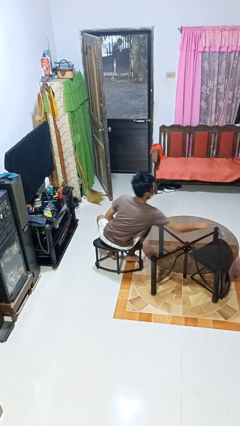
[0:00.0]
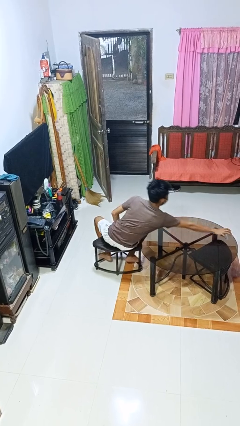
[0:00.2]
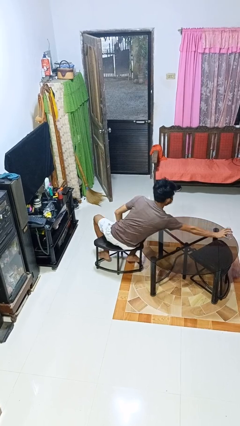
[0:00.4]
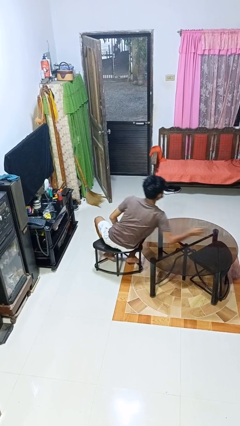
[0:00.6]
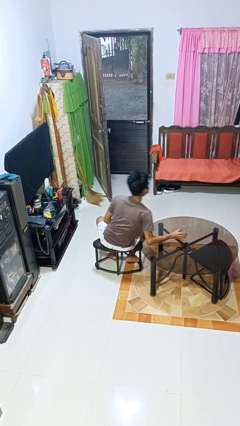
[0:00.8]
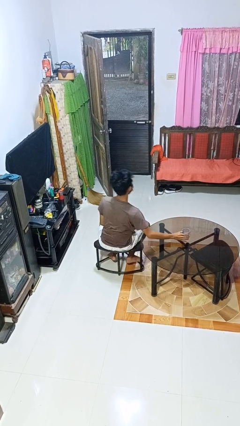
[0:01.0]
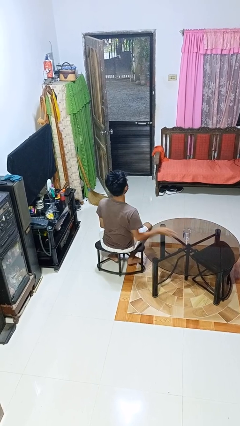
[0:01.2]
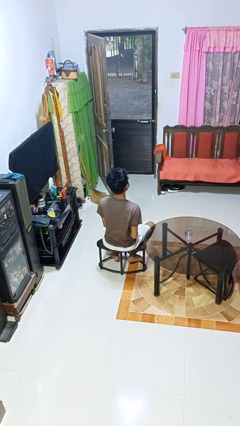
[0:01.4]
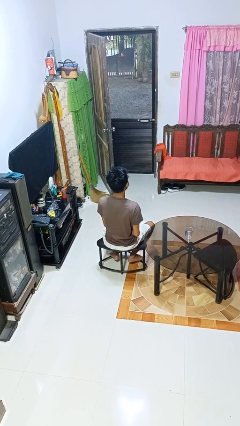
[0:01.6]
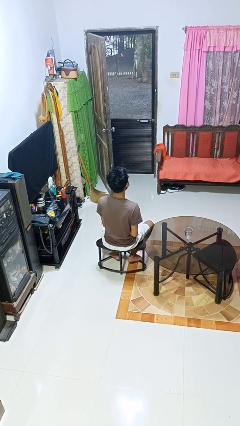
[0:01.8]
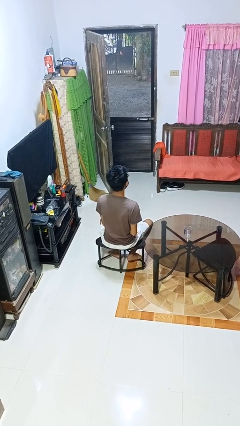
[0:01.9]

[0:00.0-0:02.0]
person sets upright glass

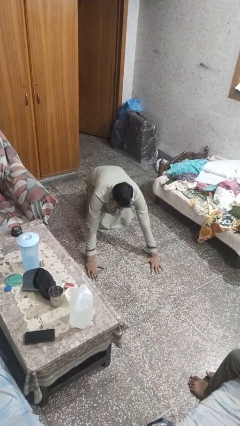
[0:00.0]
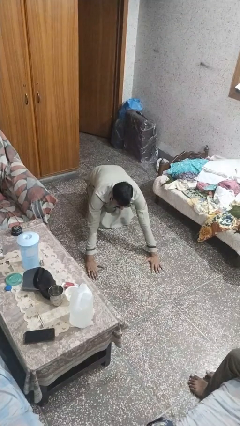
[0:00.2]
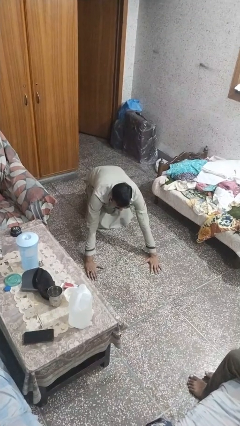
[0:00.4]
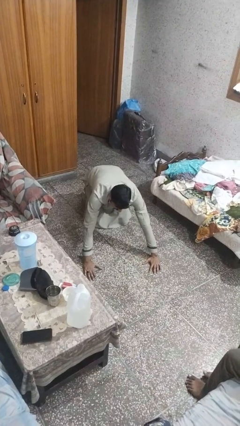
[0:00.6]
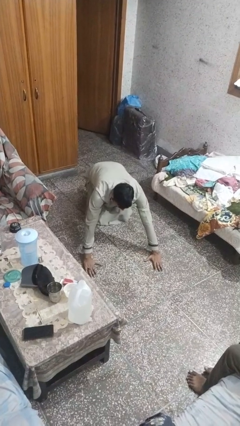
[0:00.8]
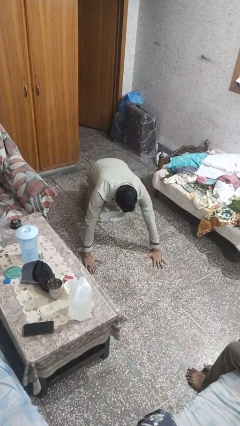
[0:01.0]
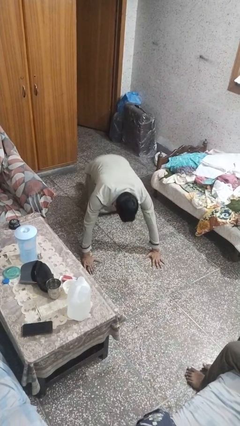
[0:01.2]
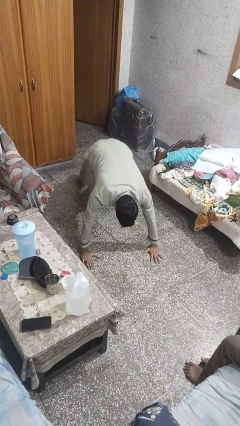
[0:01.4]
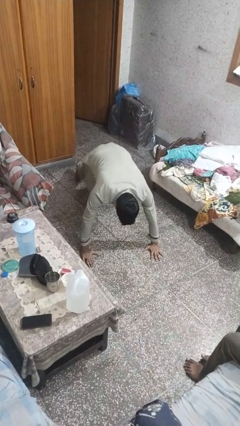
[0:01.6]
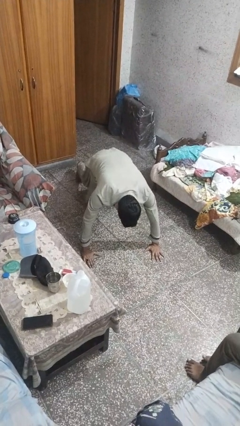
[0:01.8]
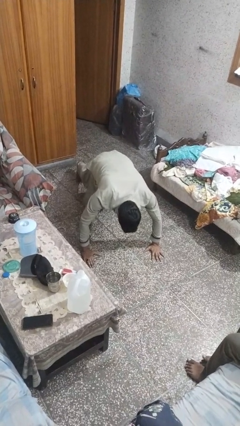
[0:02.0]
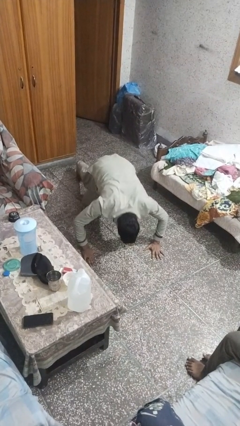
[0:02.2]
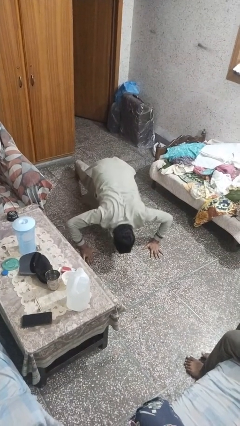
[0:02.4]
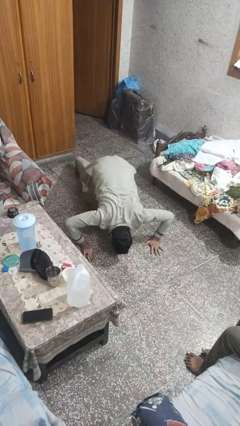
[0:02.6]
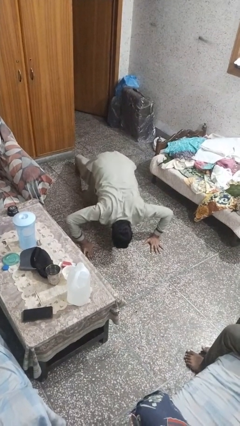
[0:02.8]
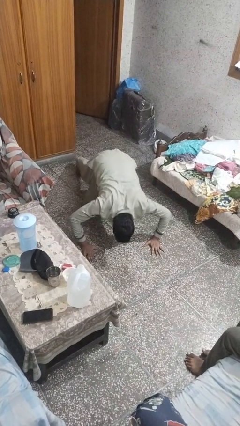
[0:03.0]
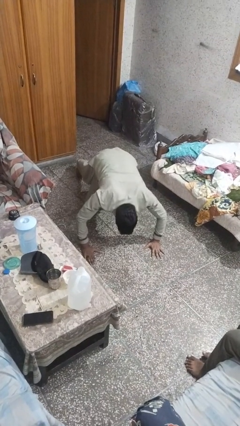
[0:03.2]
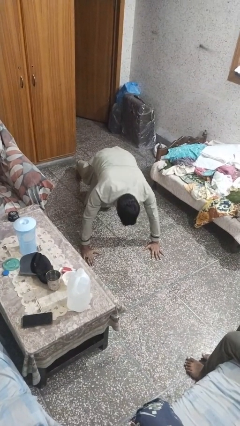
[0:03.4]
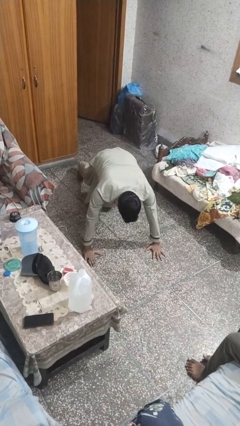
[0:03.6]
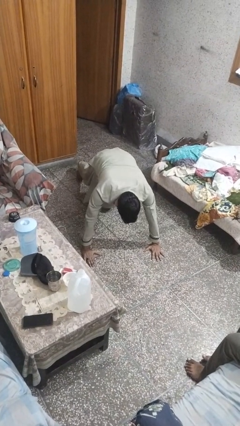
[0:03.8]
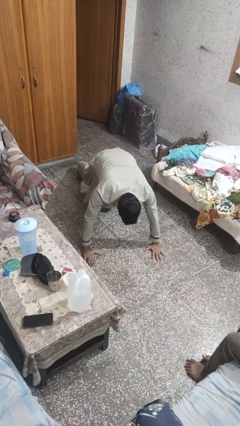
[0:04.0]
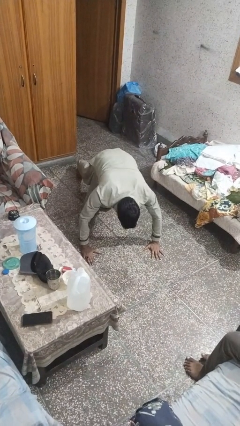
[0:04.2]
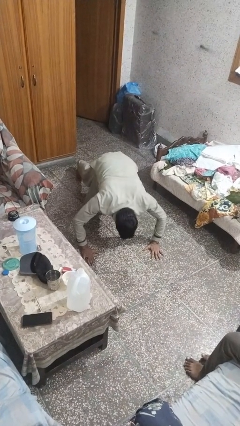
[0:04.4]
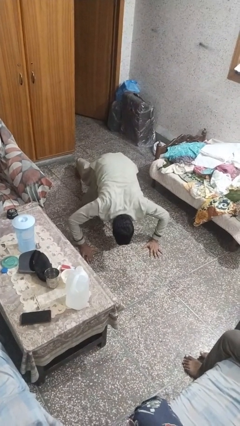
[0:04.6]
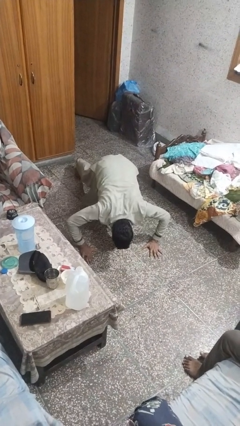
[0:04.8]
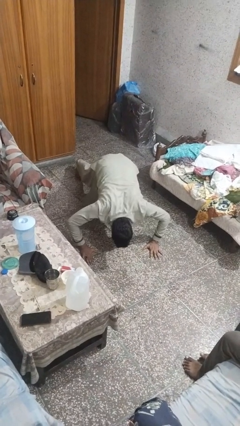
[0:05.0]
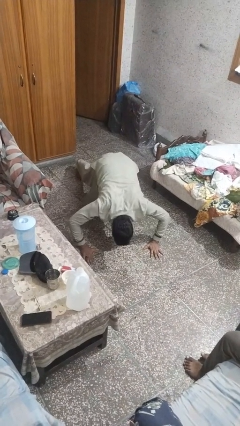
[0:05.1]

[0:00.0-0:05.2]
person exercises with pushup

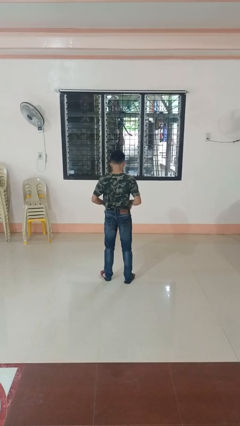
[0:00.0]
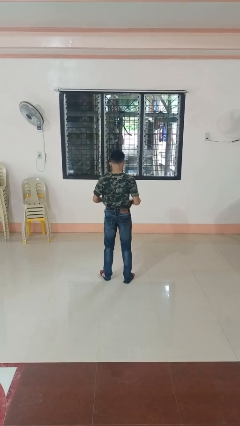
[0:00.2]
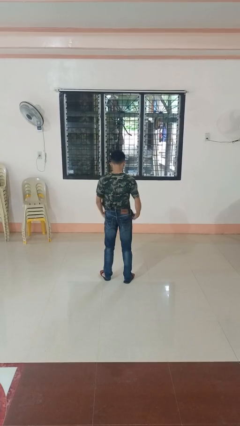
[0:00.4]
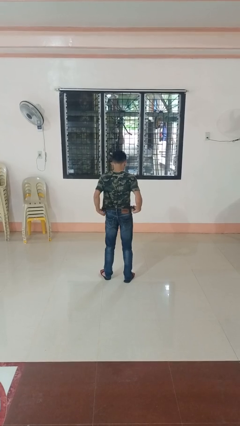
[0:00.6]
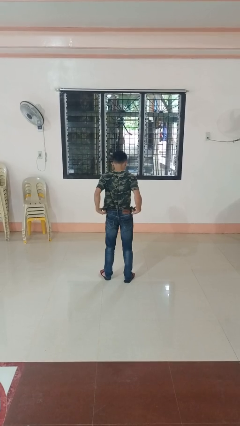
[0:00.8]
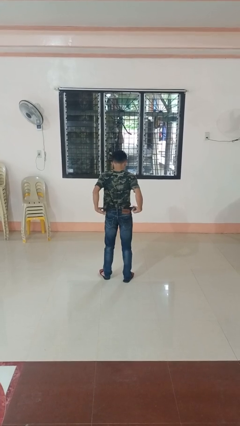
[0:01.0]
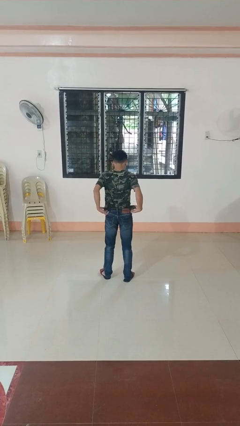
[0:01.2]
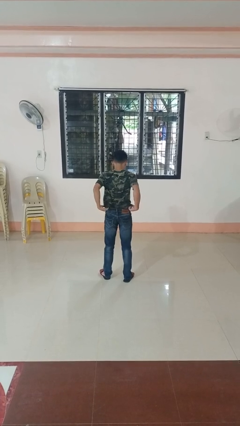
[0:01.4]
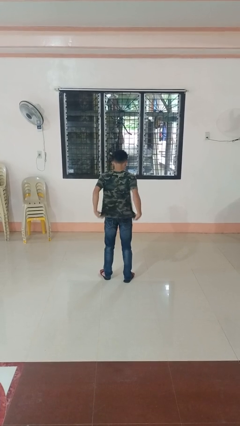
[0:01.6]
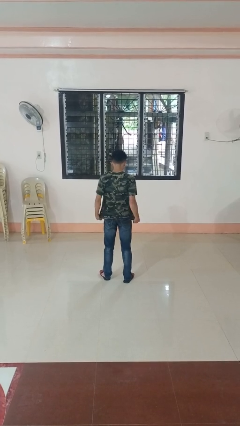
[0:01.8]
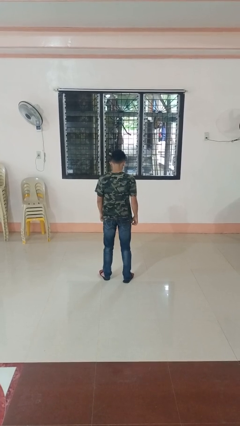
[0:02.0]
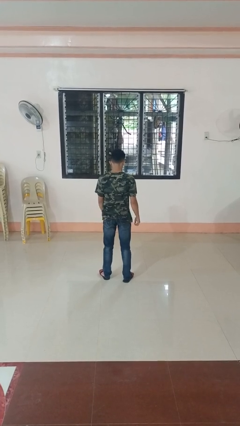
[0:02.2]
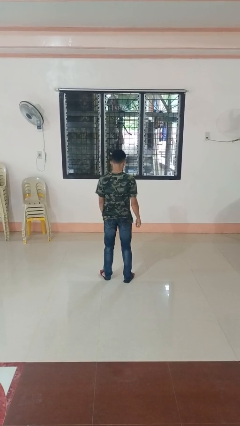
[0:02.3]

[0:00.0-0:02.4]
person untucks shirt

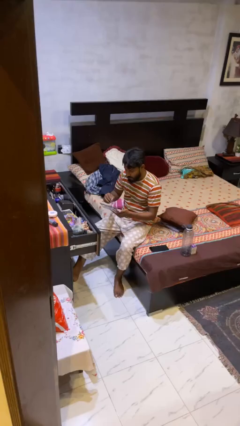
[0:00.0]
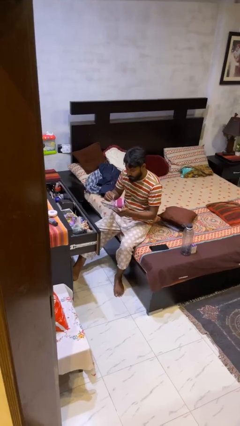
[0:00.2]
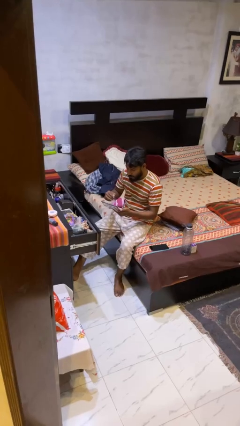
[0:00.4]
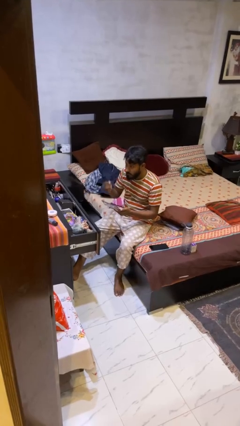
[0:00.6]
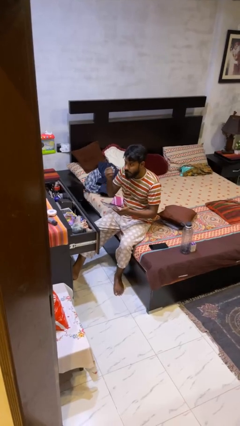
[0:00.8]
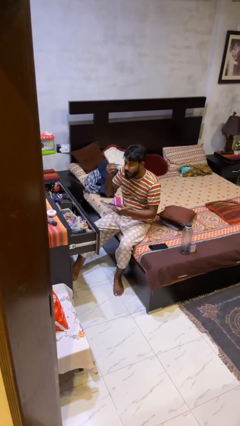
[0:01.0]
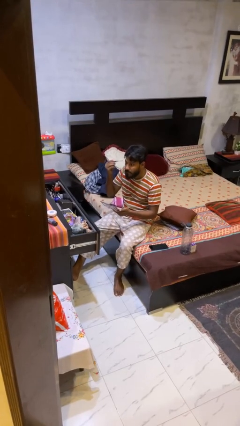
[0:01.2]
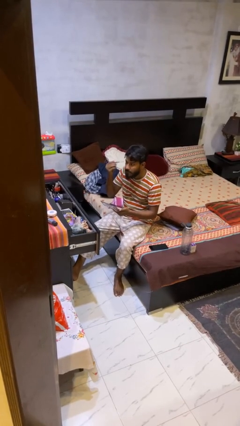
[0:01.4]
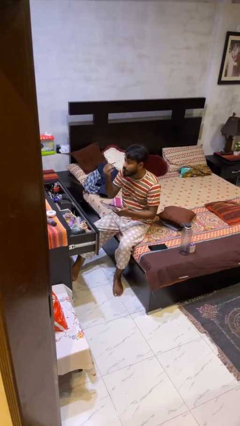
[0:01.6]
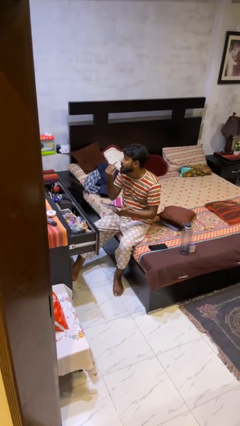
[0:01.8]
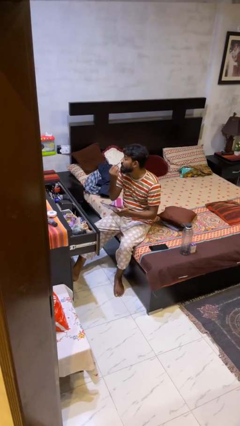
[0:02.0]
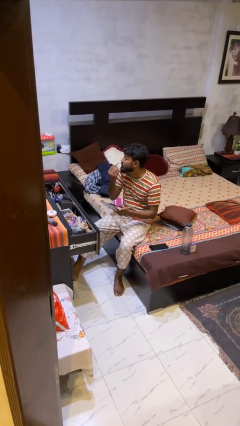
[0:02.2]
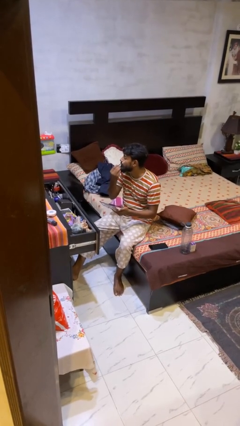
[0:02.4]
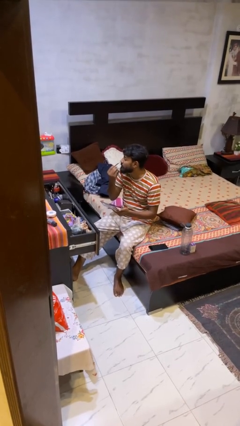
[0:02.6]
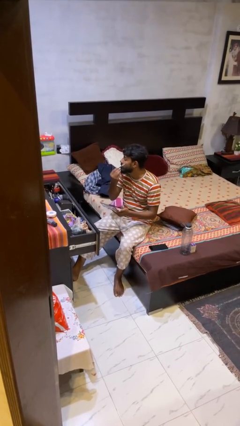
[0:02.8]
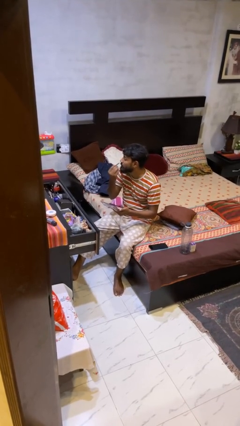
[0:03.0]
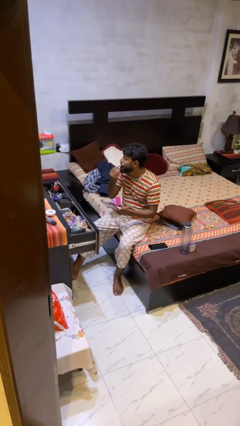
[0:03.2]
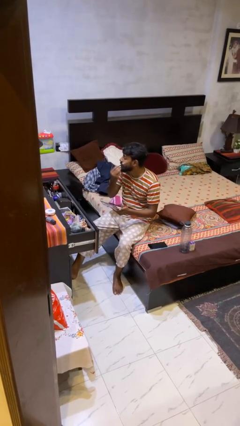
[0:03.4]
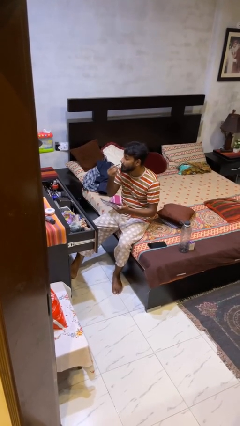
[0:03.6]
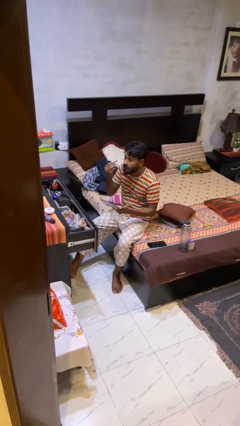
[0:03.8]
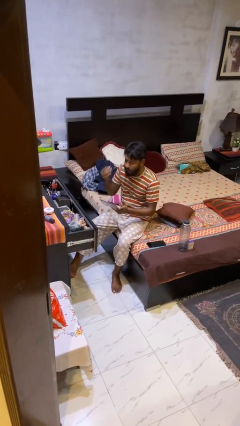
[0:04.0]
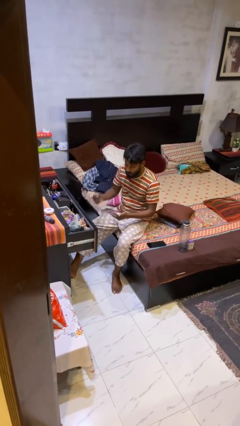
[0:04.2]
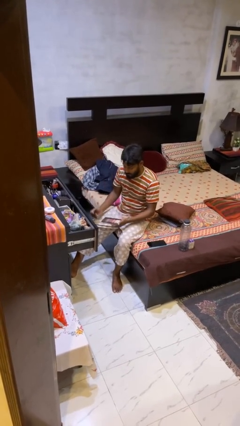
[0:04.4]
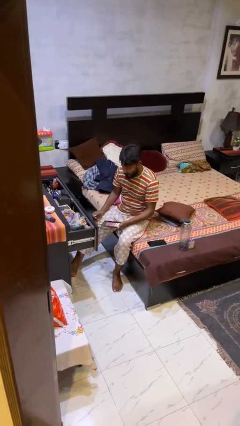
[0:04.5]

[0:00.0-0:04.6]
person applies eye makeup

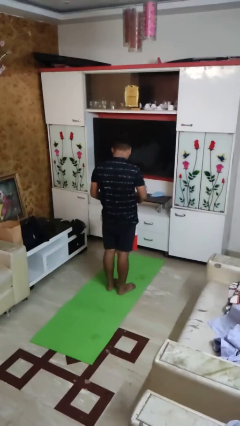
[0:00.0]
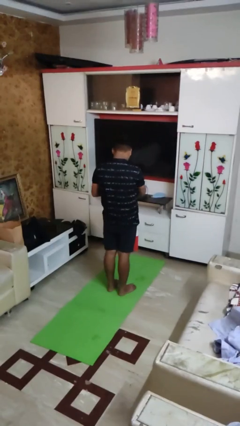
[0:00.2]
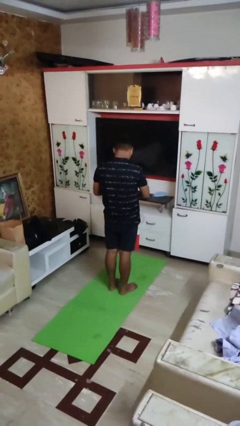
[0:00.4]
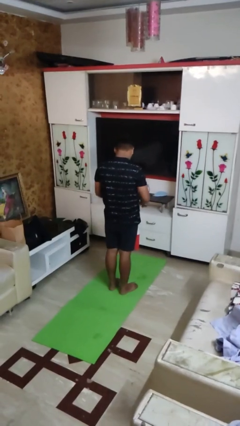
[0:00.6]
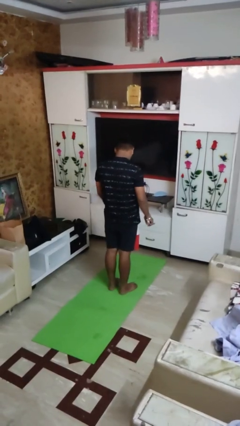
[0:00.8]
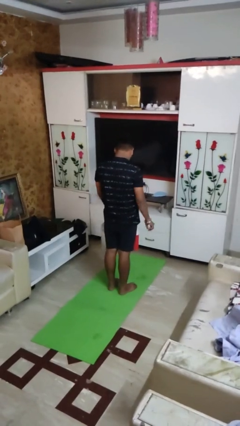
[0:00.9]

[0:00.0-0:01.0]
person puts object into basket

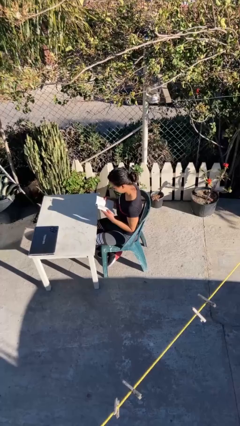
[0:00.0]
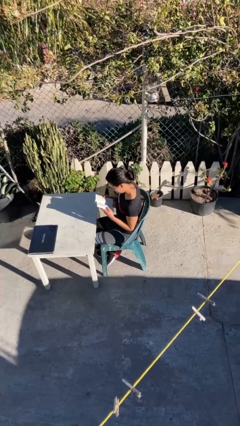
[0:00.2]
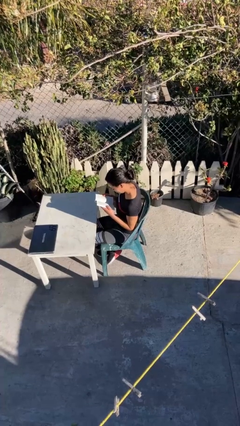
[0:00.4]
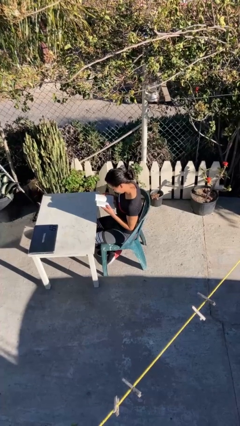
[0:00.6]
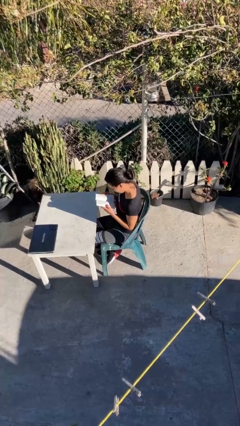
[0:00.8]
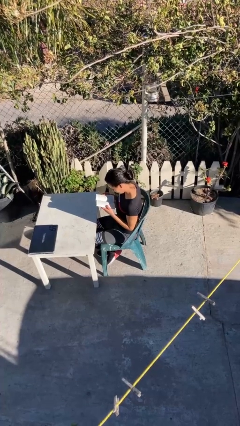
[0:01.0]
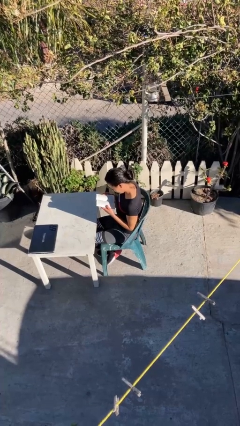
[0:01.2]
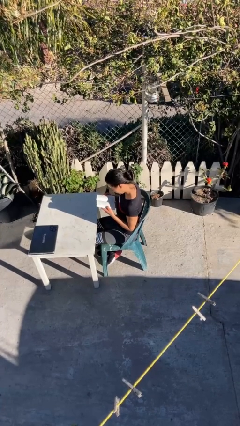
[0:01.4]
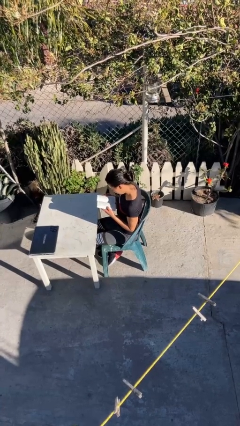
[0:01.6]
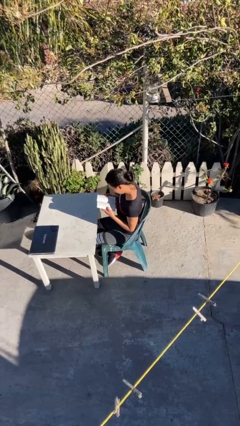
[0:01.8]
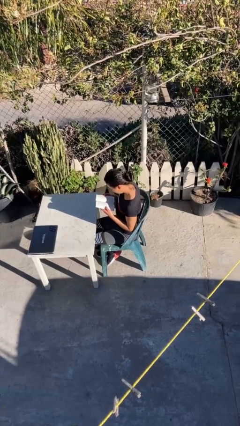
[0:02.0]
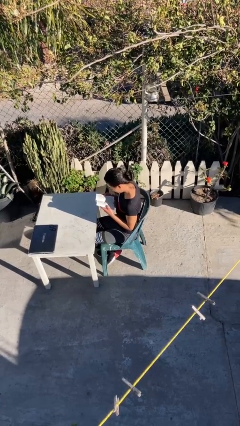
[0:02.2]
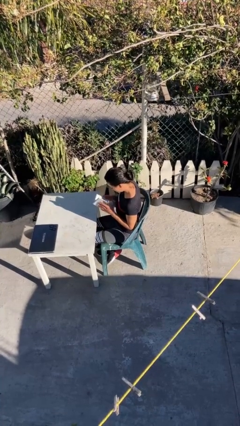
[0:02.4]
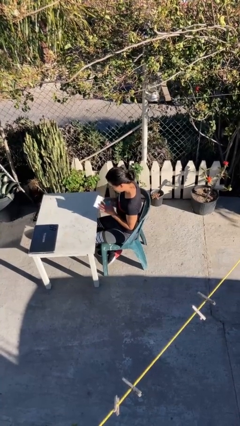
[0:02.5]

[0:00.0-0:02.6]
person reads document
